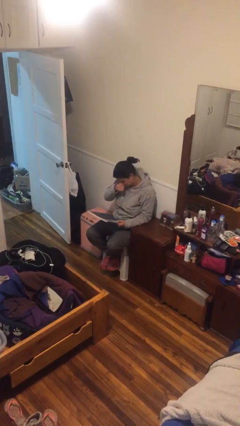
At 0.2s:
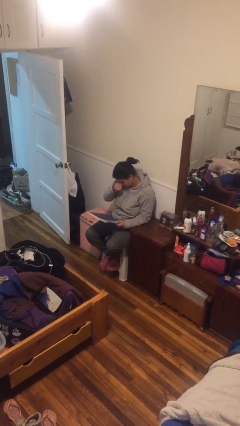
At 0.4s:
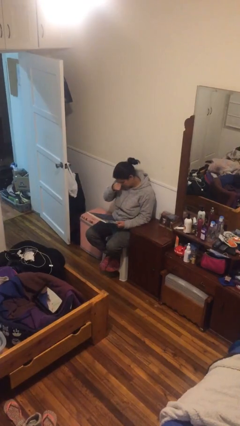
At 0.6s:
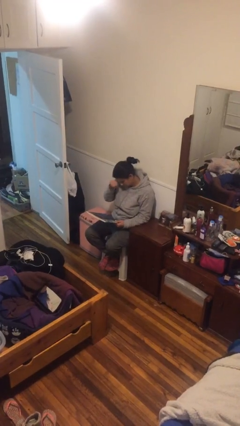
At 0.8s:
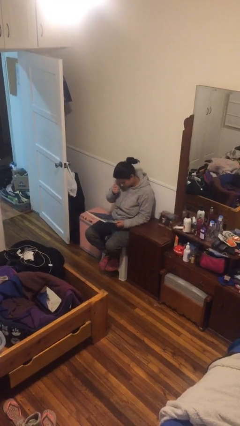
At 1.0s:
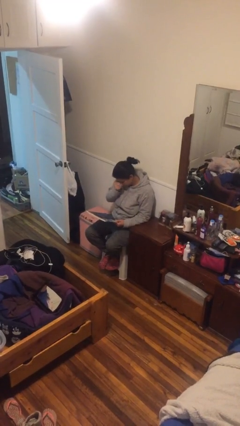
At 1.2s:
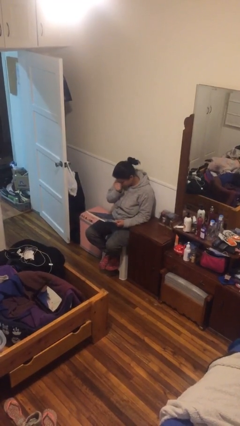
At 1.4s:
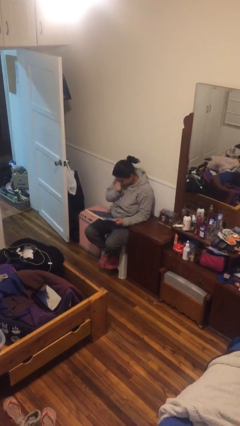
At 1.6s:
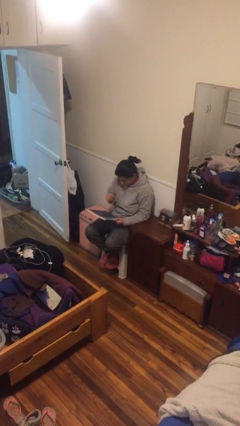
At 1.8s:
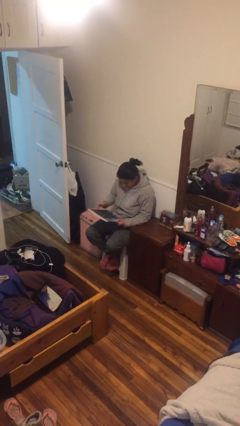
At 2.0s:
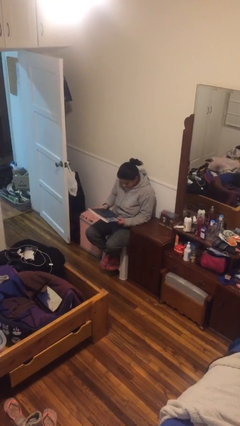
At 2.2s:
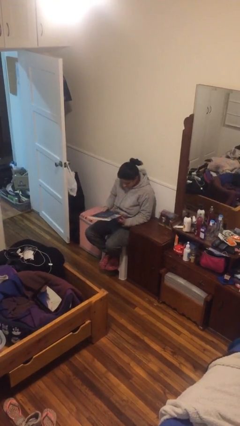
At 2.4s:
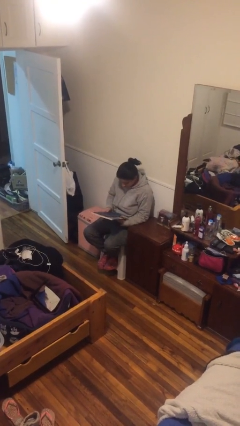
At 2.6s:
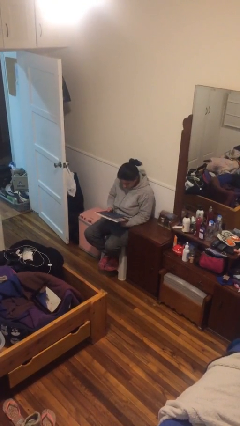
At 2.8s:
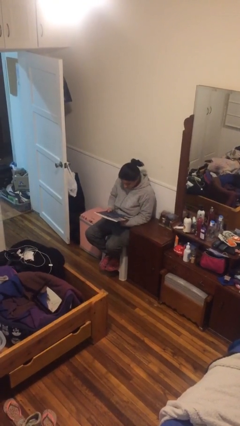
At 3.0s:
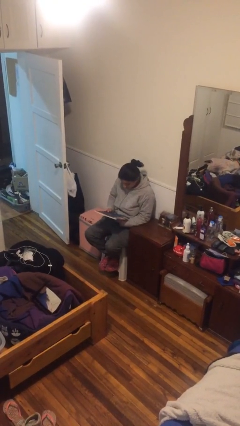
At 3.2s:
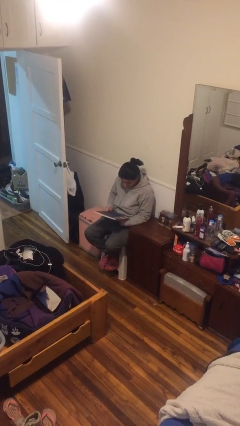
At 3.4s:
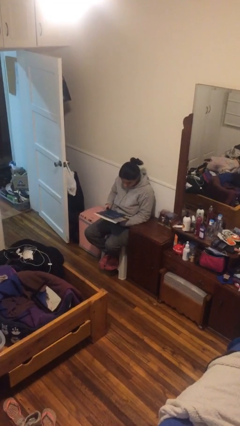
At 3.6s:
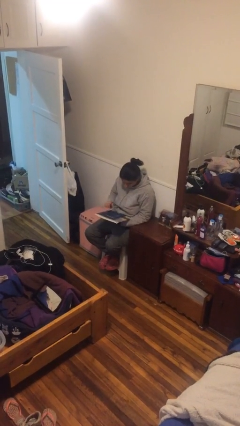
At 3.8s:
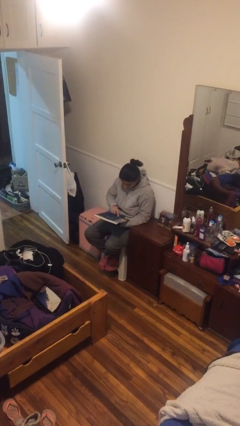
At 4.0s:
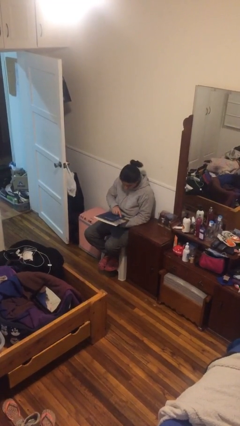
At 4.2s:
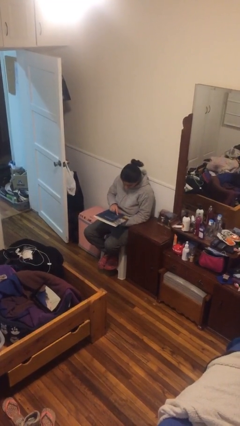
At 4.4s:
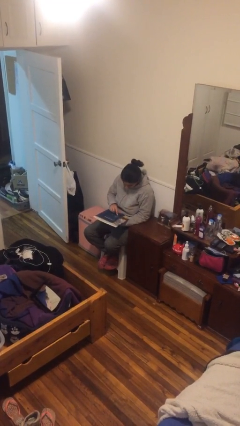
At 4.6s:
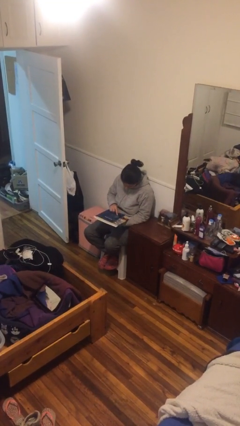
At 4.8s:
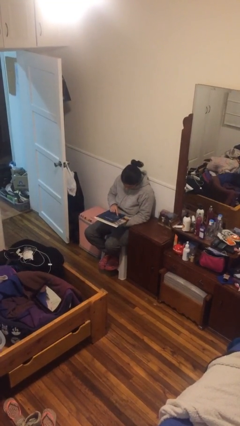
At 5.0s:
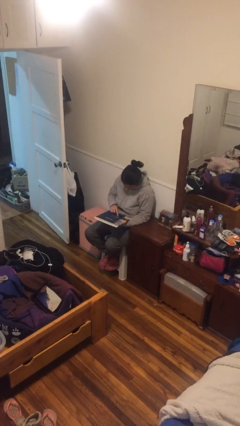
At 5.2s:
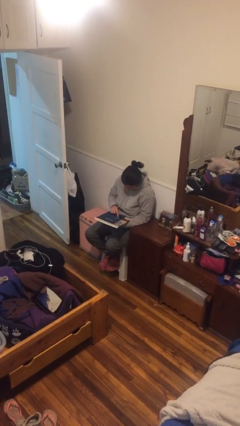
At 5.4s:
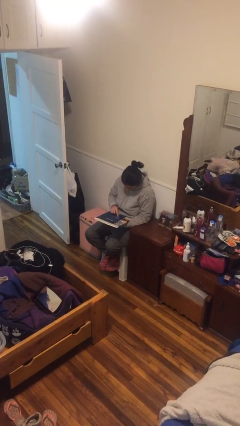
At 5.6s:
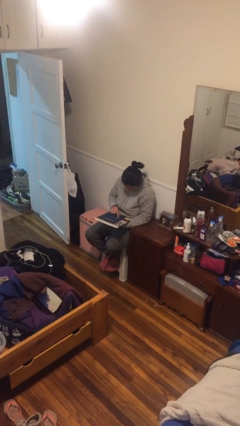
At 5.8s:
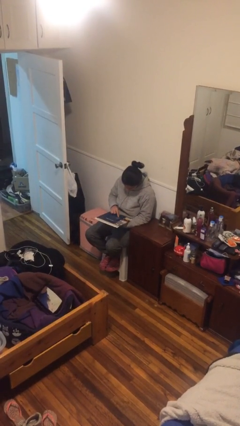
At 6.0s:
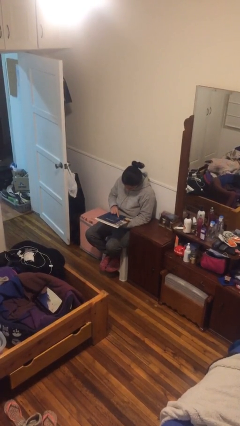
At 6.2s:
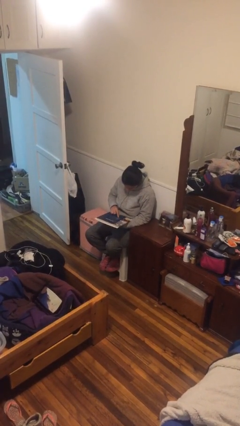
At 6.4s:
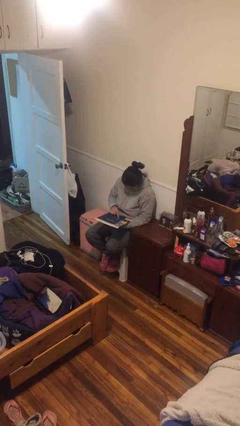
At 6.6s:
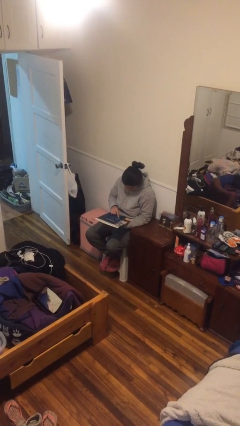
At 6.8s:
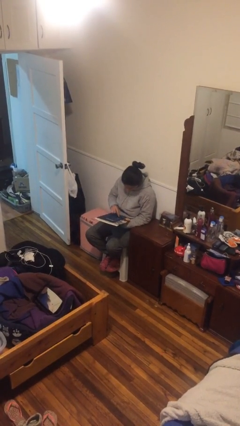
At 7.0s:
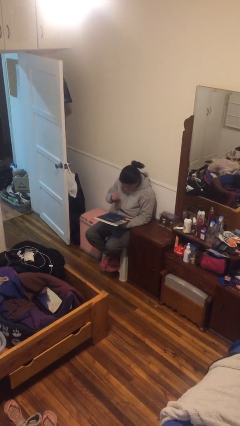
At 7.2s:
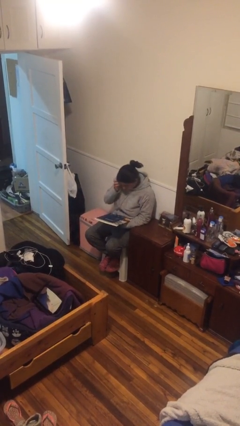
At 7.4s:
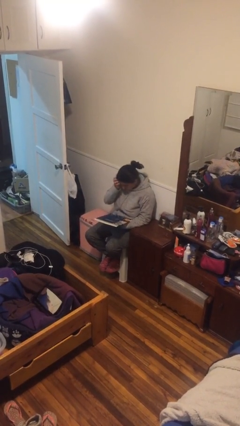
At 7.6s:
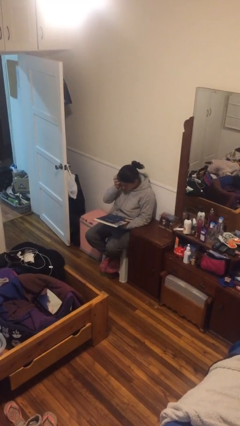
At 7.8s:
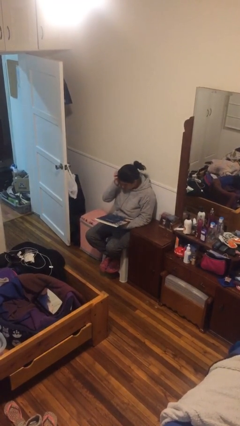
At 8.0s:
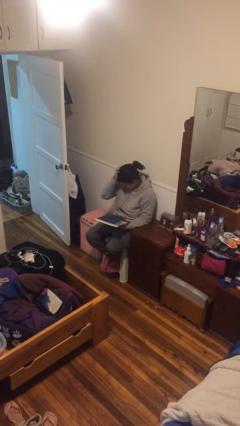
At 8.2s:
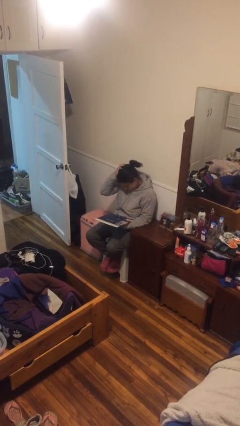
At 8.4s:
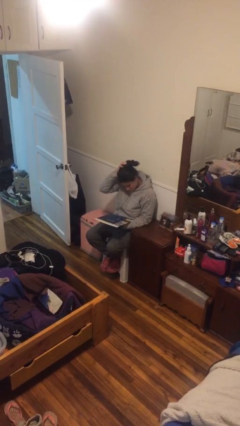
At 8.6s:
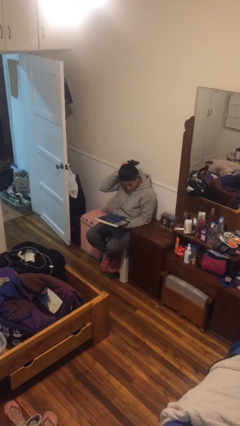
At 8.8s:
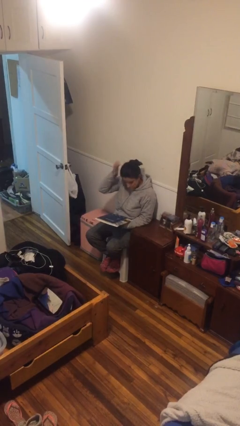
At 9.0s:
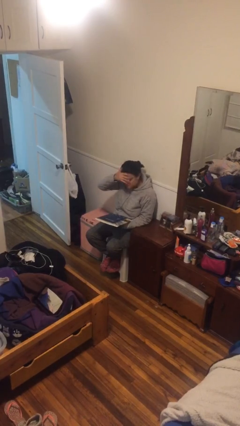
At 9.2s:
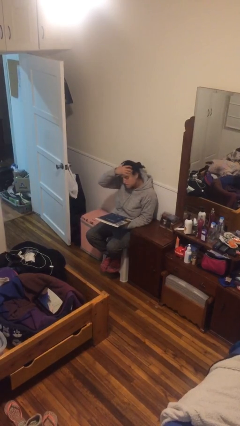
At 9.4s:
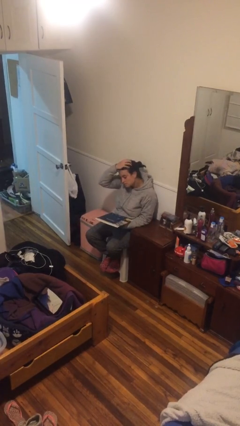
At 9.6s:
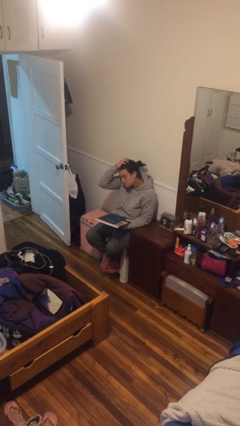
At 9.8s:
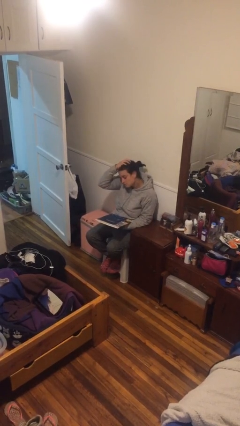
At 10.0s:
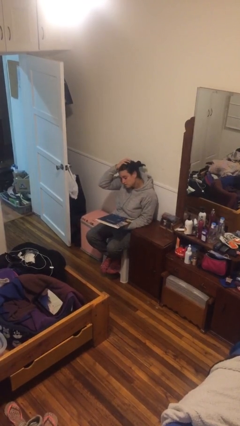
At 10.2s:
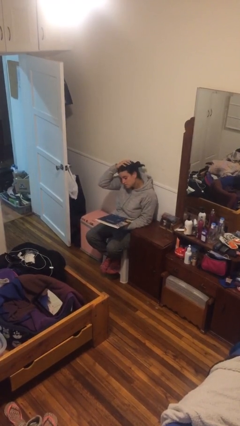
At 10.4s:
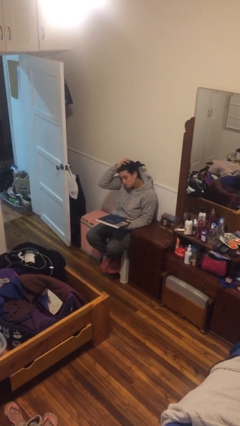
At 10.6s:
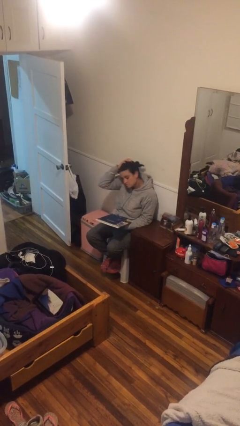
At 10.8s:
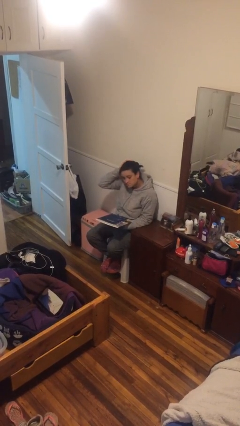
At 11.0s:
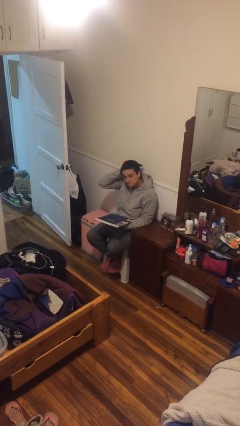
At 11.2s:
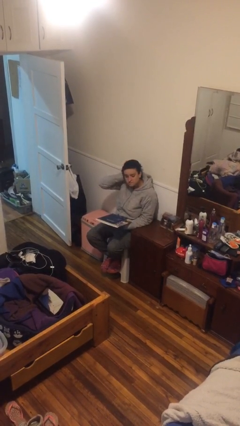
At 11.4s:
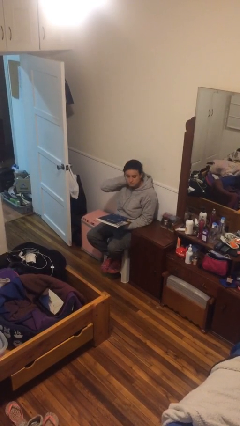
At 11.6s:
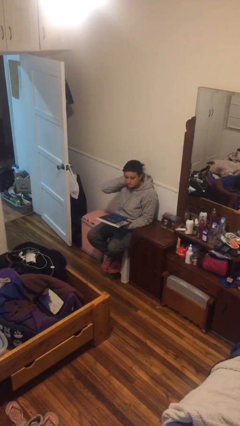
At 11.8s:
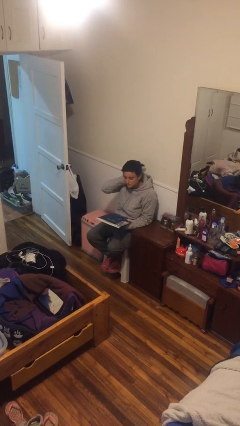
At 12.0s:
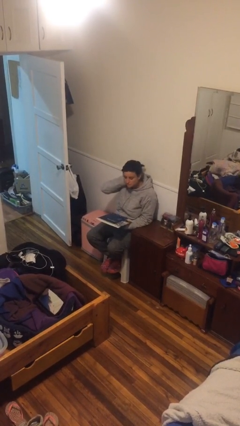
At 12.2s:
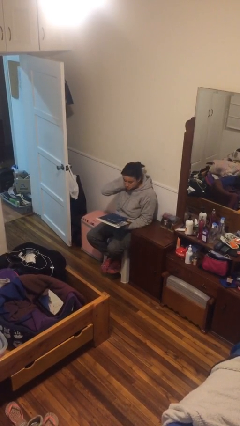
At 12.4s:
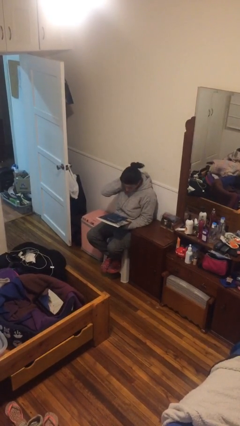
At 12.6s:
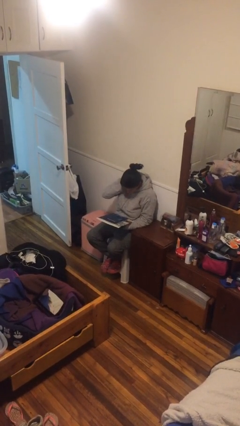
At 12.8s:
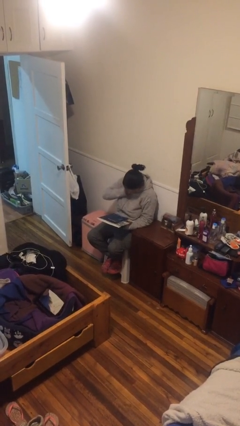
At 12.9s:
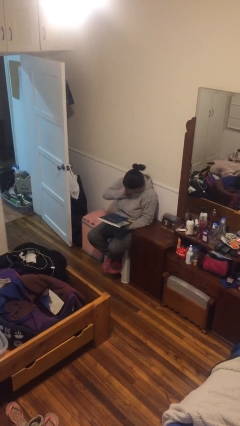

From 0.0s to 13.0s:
person reads document

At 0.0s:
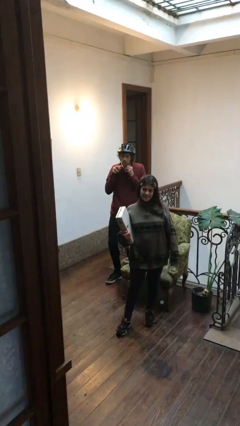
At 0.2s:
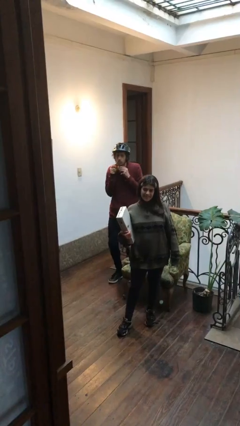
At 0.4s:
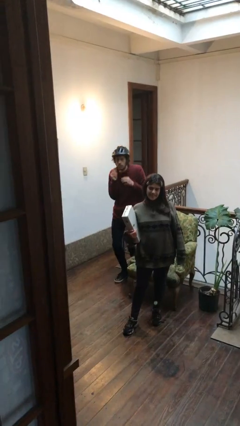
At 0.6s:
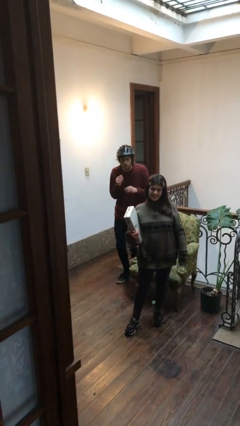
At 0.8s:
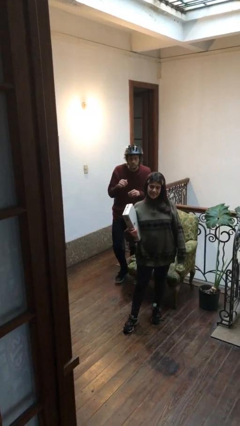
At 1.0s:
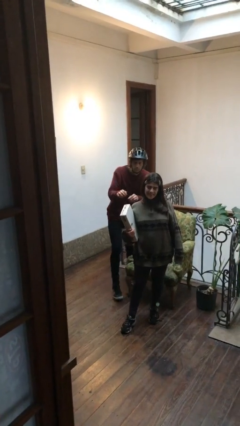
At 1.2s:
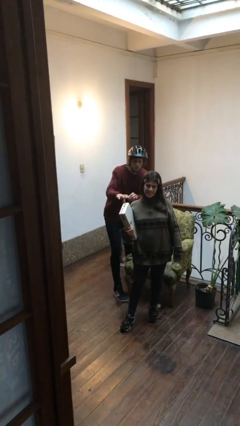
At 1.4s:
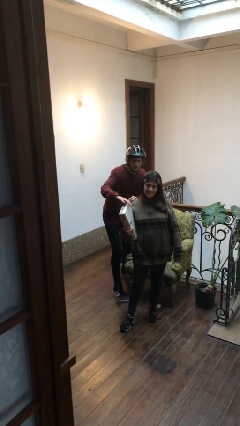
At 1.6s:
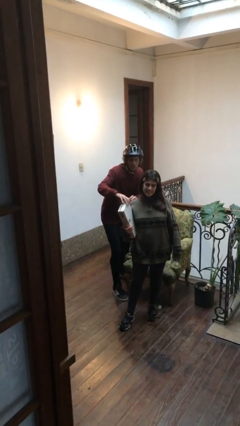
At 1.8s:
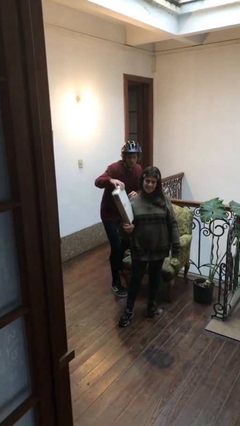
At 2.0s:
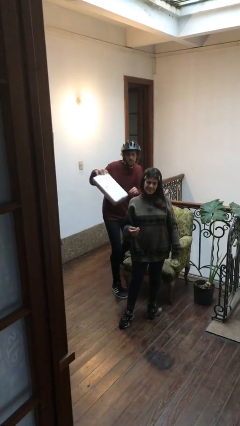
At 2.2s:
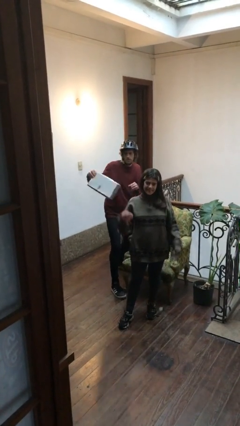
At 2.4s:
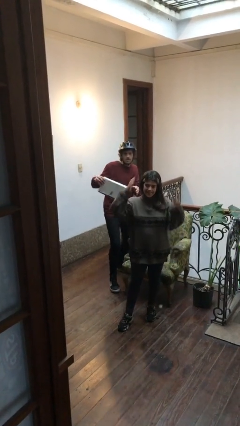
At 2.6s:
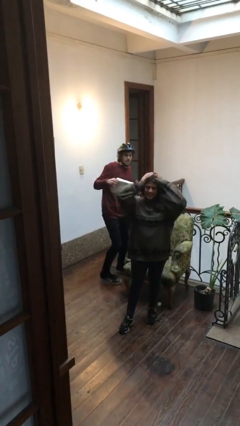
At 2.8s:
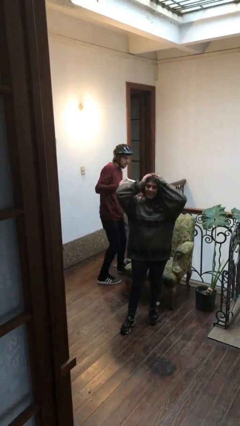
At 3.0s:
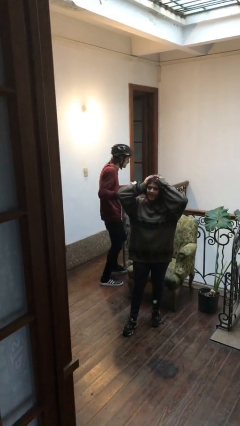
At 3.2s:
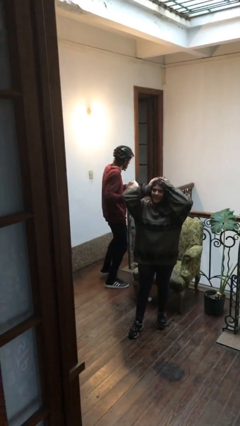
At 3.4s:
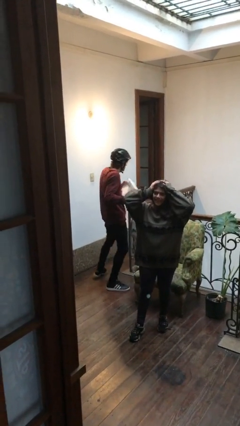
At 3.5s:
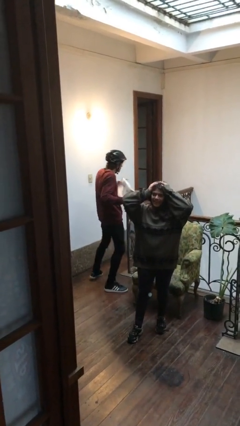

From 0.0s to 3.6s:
person steals object from person

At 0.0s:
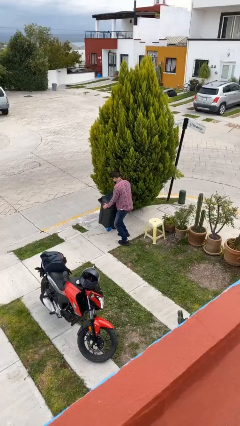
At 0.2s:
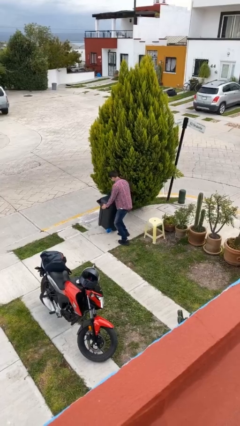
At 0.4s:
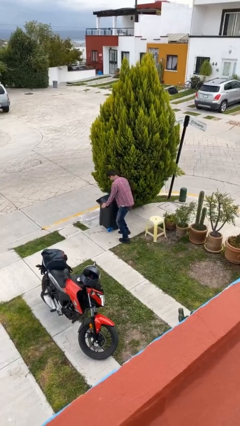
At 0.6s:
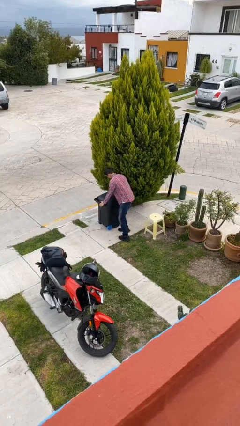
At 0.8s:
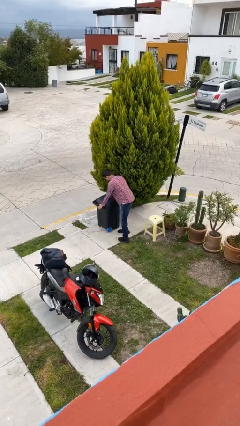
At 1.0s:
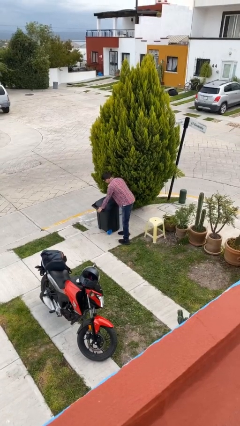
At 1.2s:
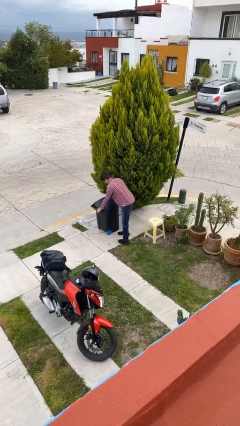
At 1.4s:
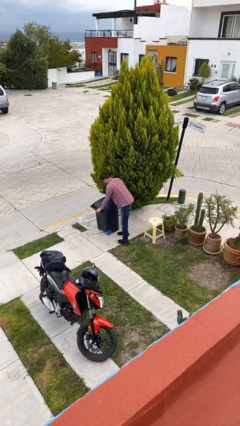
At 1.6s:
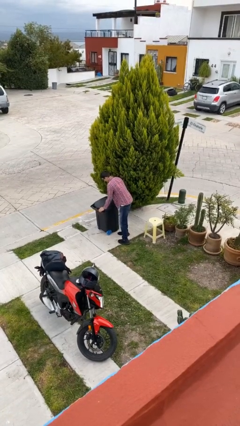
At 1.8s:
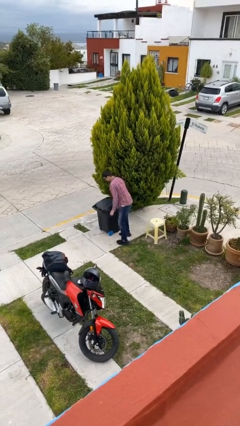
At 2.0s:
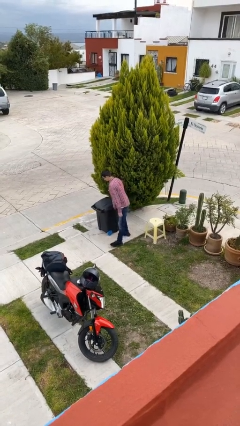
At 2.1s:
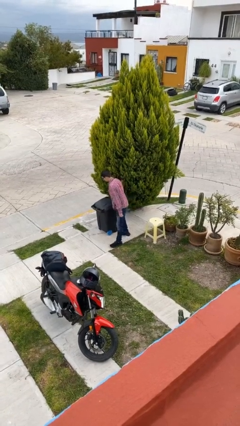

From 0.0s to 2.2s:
person puts down object on floor
